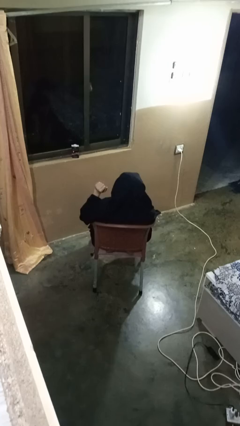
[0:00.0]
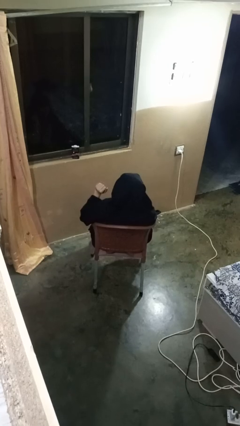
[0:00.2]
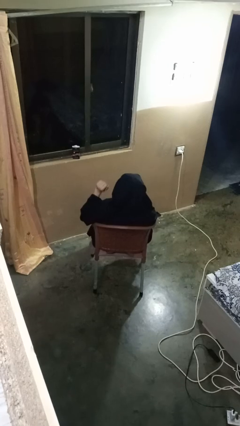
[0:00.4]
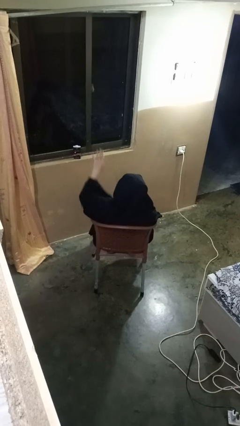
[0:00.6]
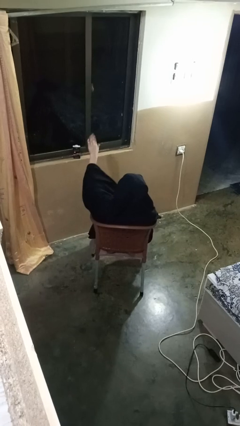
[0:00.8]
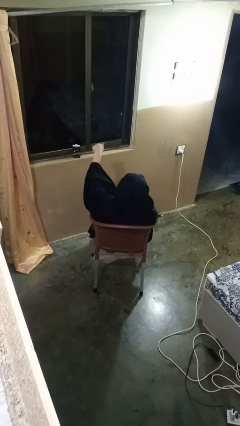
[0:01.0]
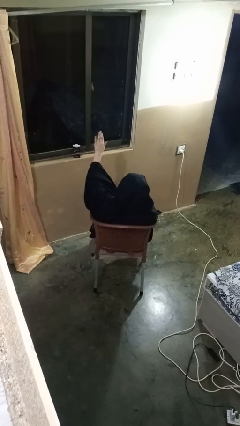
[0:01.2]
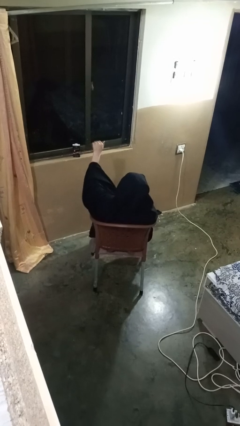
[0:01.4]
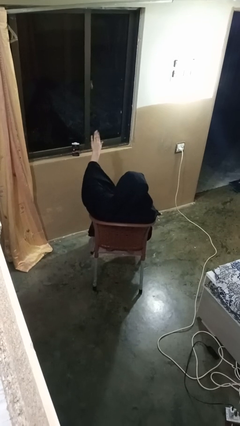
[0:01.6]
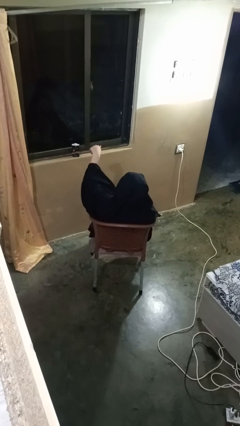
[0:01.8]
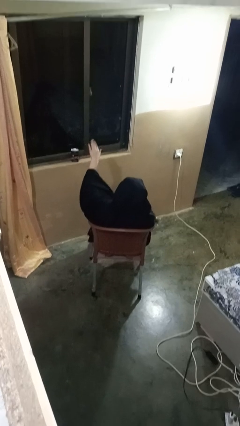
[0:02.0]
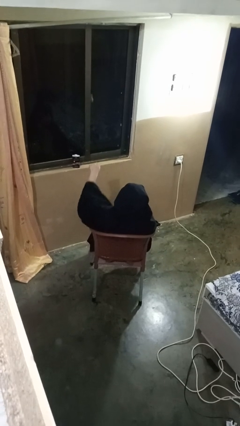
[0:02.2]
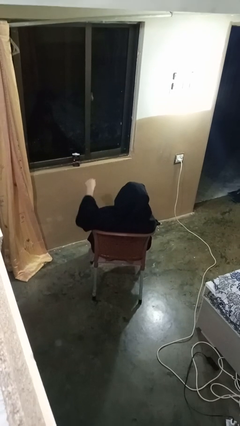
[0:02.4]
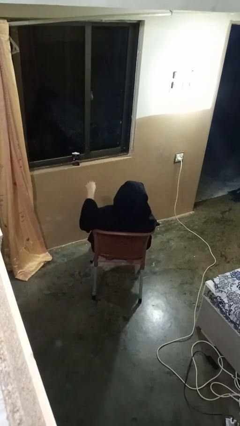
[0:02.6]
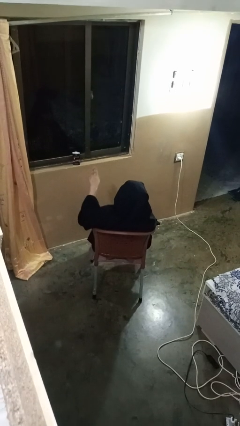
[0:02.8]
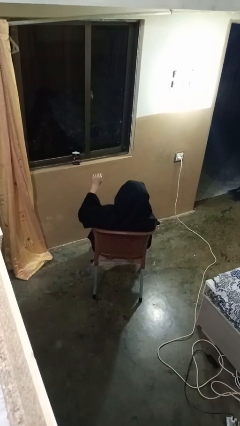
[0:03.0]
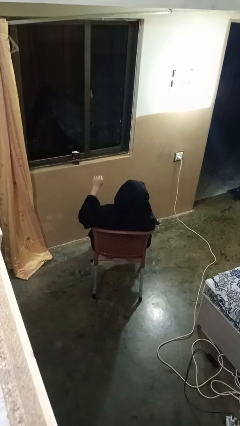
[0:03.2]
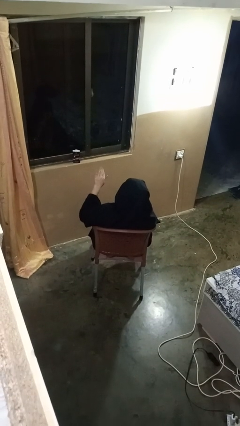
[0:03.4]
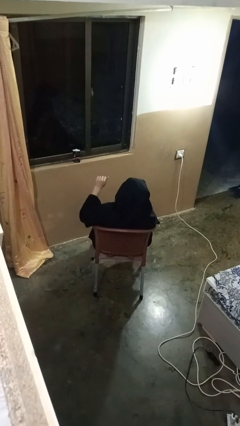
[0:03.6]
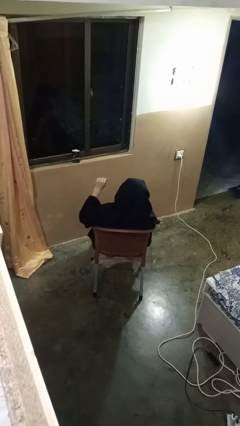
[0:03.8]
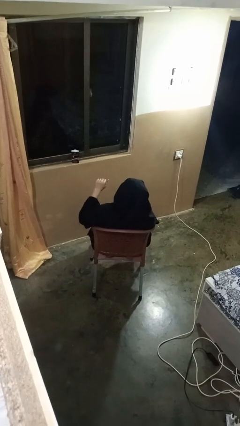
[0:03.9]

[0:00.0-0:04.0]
person gestures come here

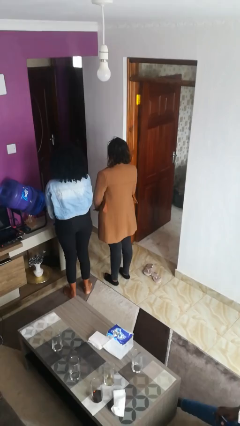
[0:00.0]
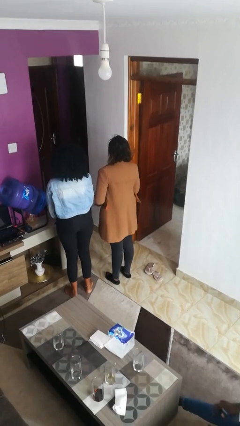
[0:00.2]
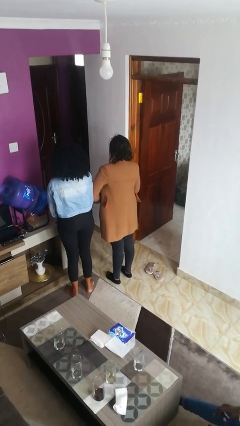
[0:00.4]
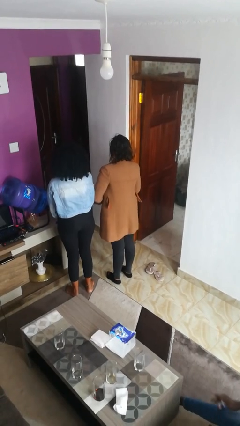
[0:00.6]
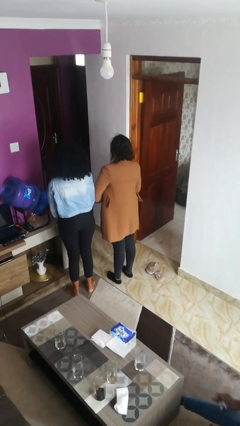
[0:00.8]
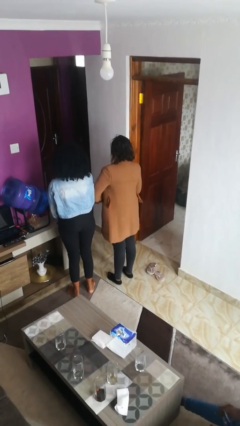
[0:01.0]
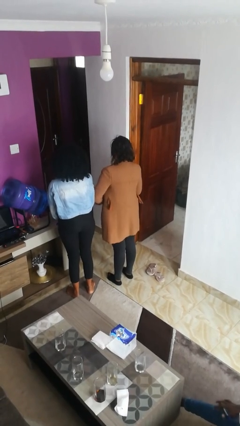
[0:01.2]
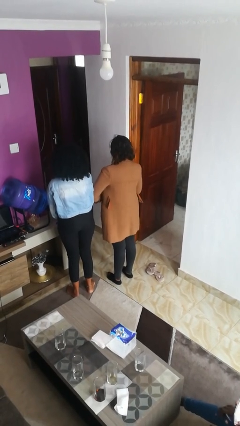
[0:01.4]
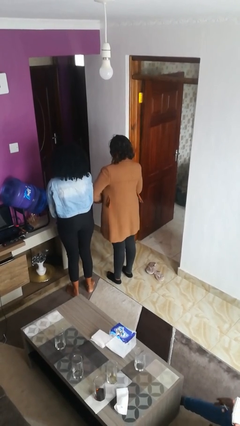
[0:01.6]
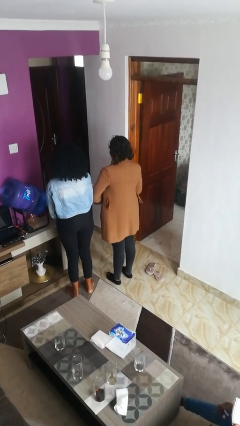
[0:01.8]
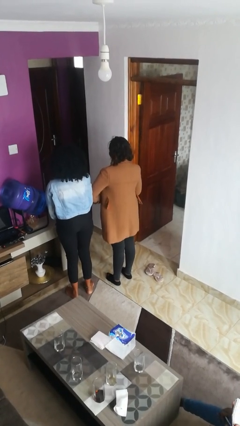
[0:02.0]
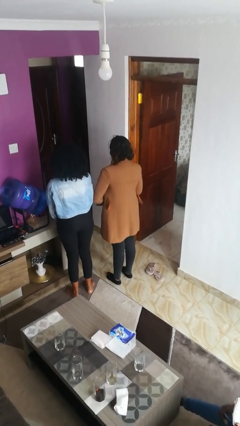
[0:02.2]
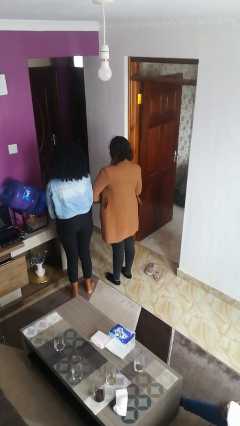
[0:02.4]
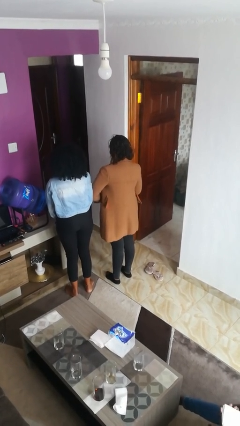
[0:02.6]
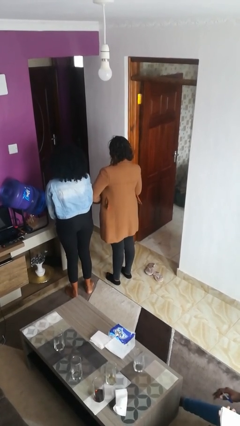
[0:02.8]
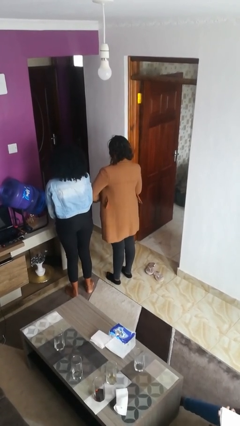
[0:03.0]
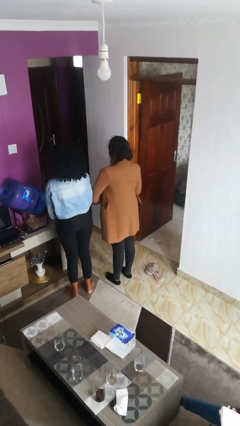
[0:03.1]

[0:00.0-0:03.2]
person nudges person with elbow

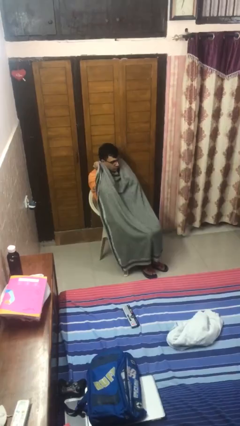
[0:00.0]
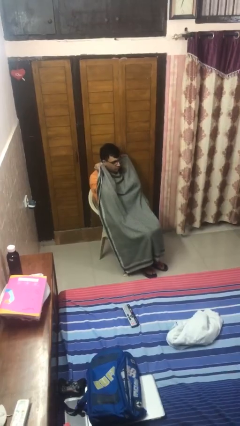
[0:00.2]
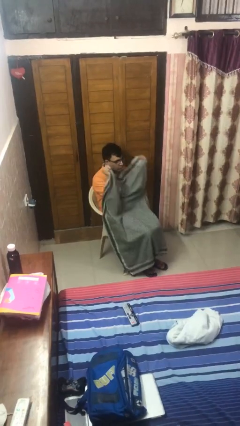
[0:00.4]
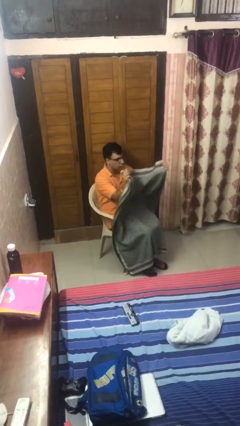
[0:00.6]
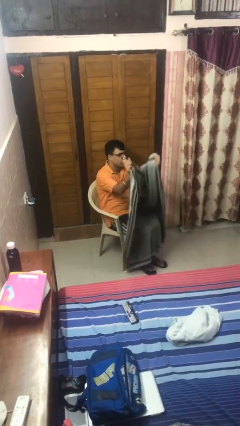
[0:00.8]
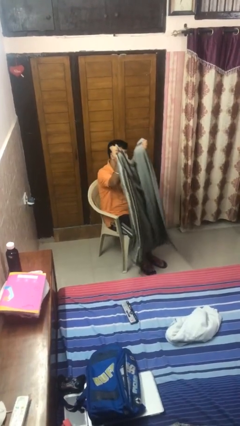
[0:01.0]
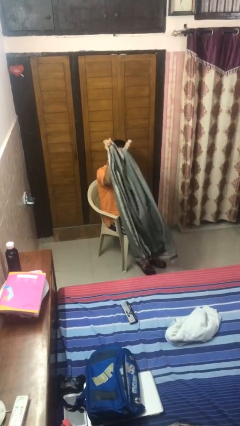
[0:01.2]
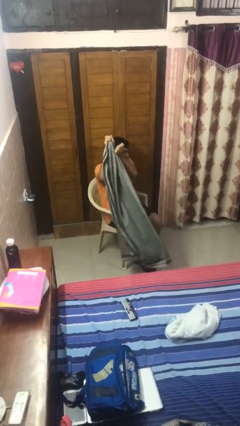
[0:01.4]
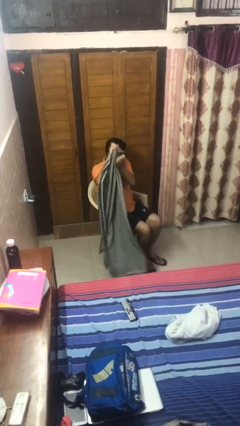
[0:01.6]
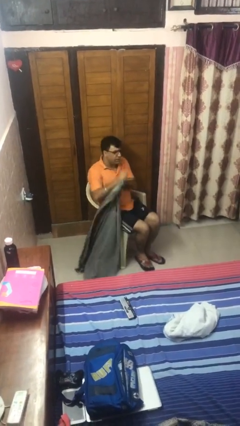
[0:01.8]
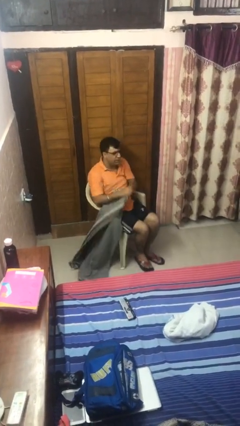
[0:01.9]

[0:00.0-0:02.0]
person uncovers with blanket

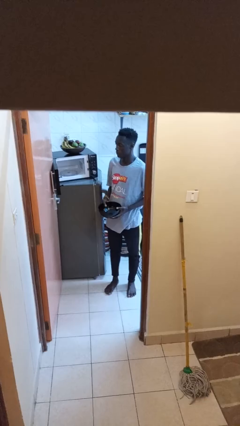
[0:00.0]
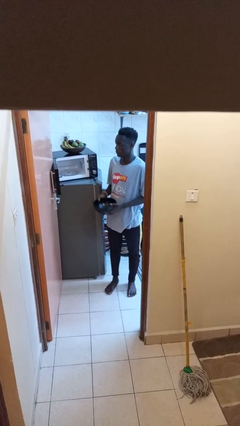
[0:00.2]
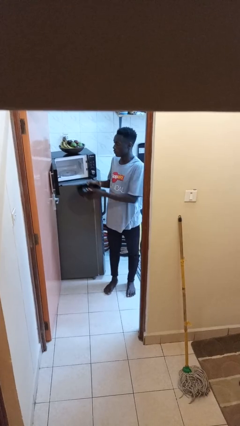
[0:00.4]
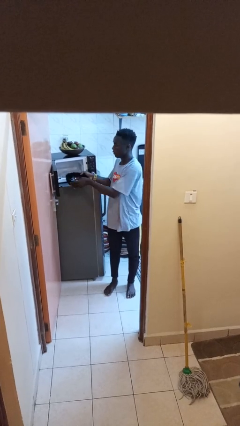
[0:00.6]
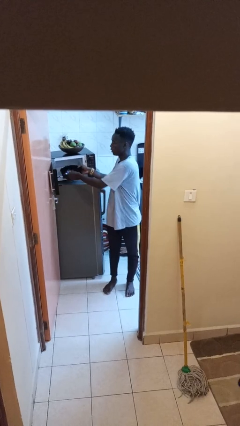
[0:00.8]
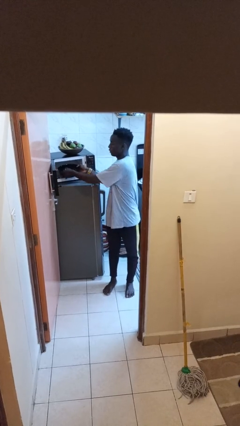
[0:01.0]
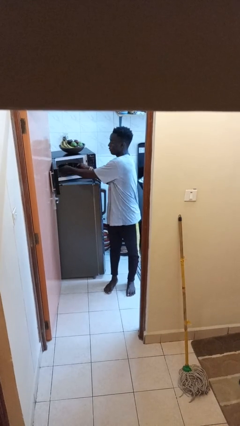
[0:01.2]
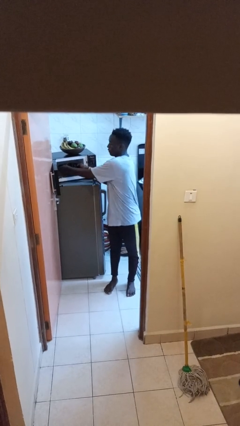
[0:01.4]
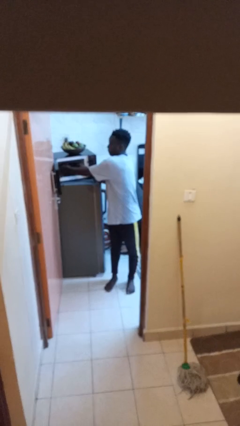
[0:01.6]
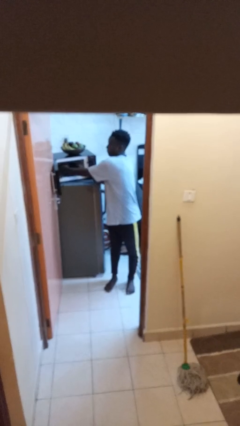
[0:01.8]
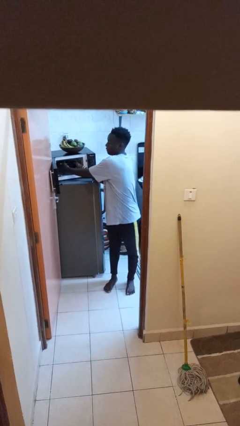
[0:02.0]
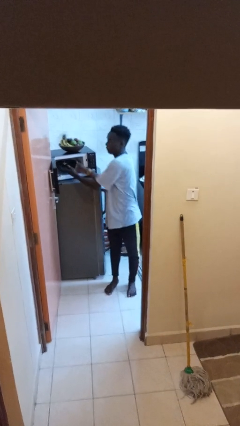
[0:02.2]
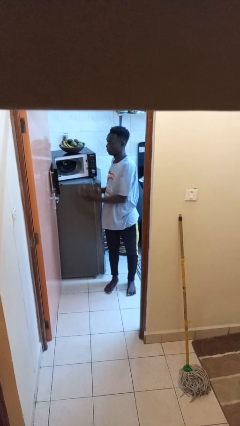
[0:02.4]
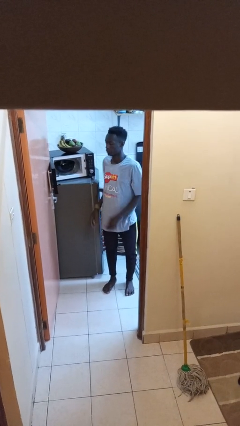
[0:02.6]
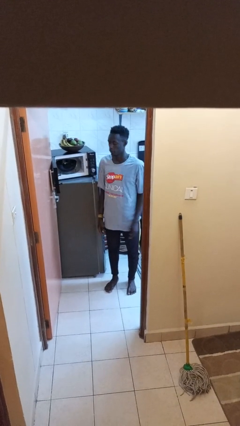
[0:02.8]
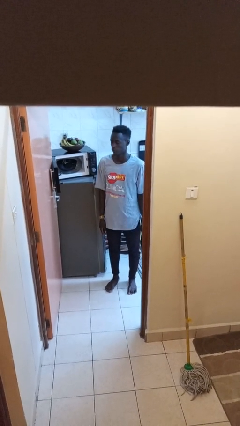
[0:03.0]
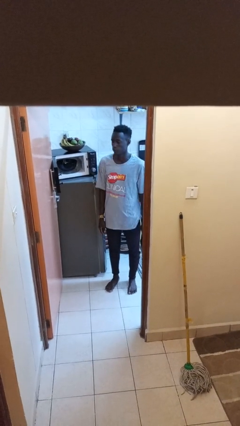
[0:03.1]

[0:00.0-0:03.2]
person puts object into microwave

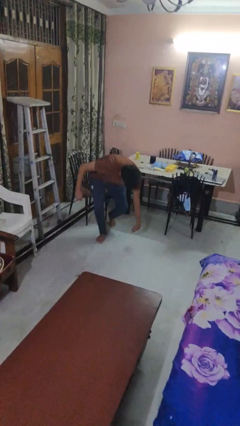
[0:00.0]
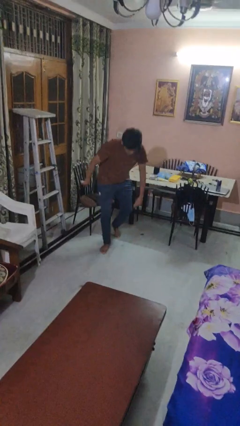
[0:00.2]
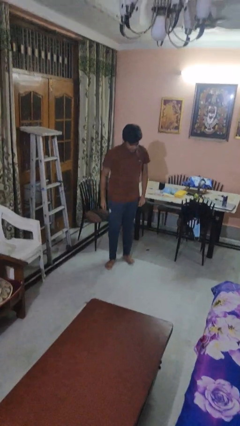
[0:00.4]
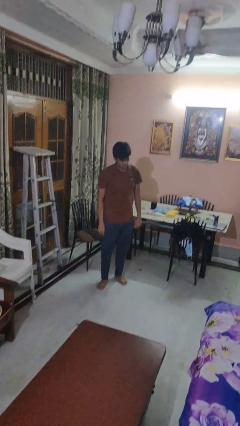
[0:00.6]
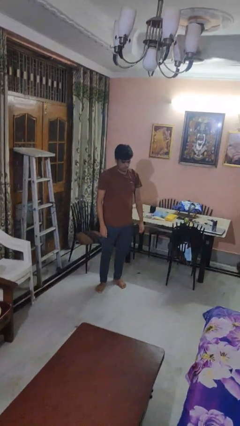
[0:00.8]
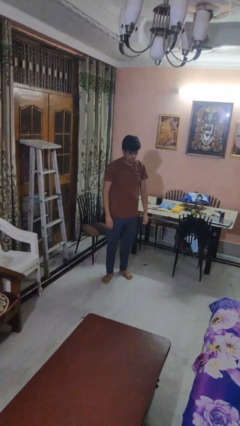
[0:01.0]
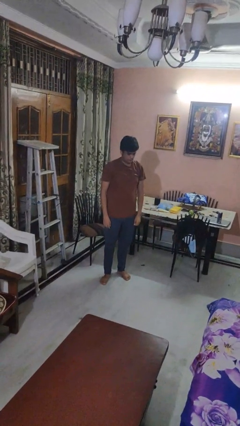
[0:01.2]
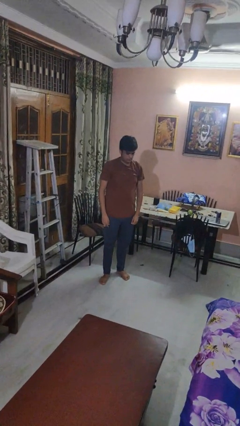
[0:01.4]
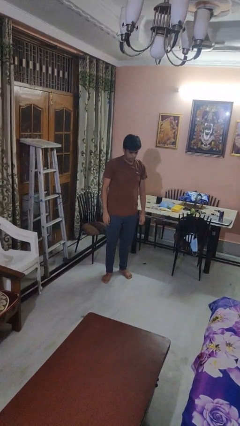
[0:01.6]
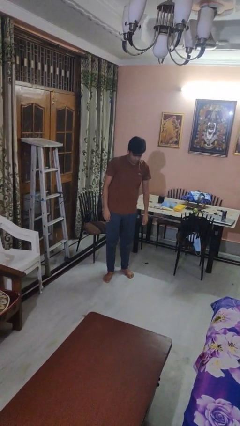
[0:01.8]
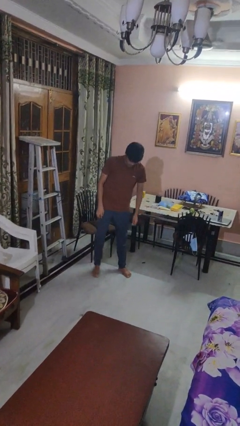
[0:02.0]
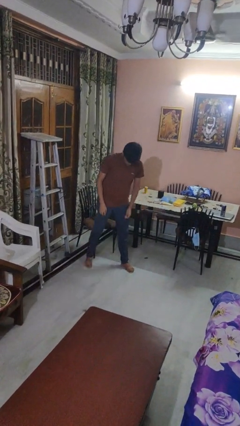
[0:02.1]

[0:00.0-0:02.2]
person stands up from floor

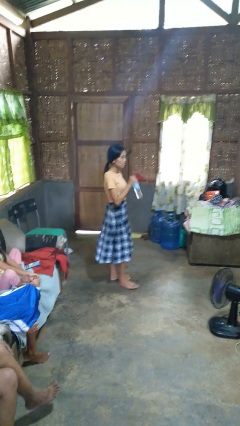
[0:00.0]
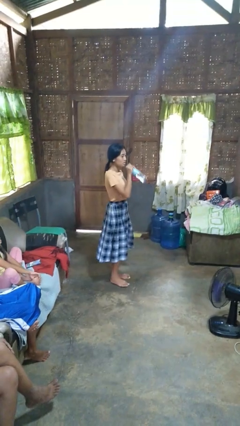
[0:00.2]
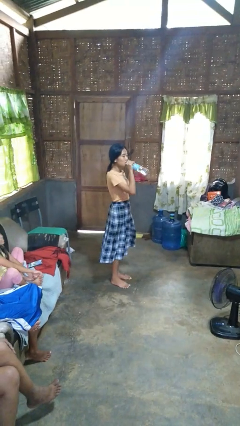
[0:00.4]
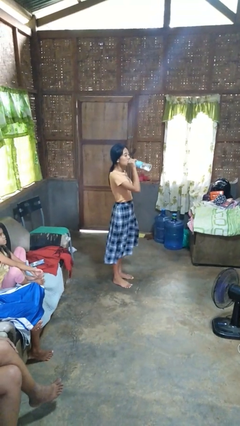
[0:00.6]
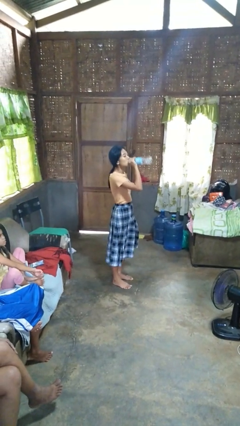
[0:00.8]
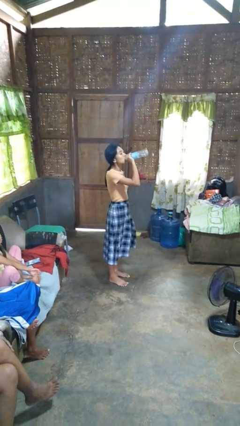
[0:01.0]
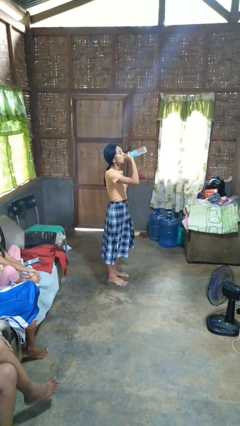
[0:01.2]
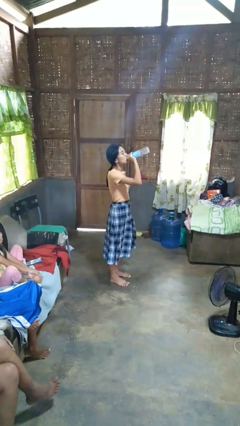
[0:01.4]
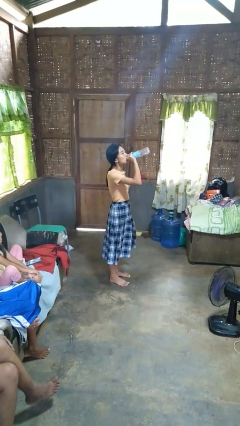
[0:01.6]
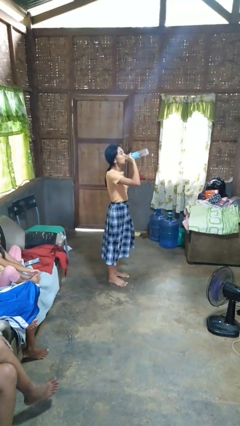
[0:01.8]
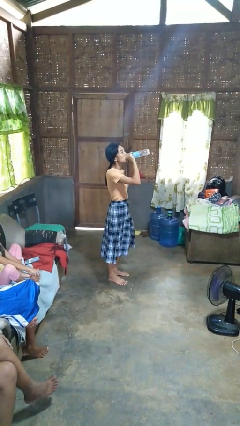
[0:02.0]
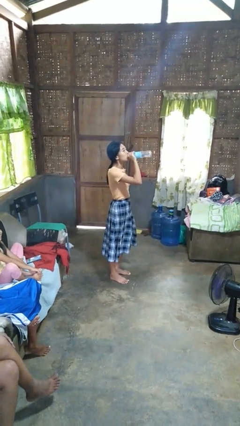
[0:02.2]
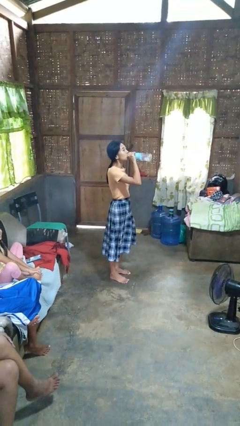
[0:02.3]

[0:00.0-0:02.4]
person drinks from bottle

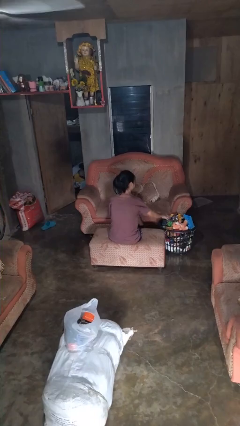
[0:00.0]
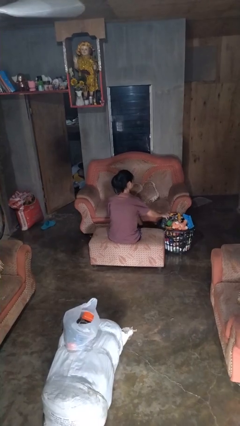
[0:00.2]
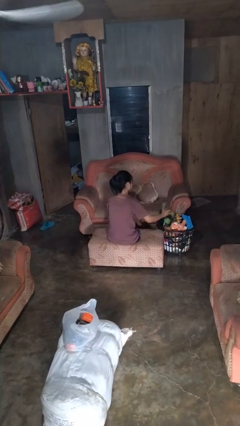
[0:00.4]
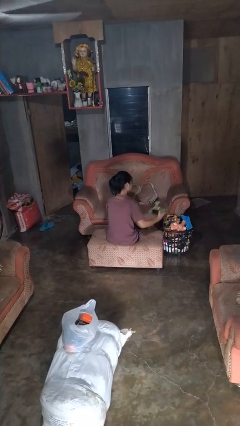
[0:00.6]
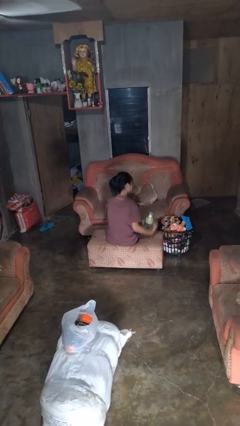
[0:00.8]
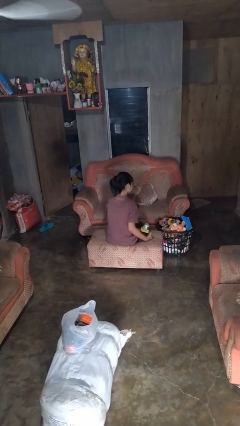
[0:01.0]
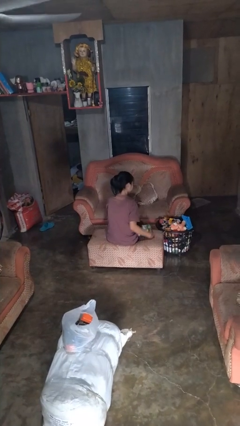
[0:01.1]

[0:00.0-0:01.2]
person takes object from basket
